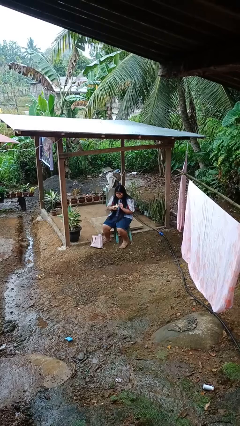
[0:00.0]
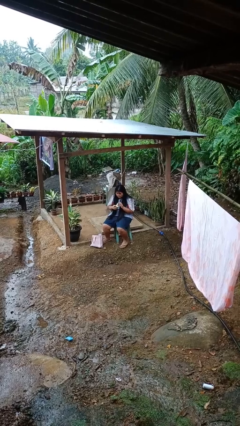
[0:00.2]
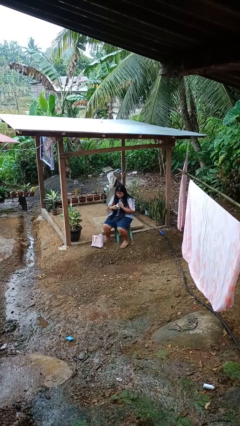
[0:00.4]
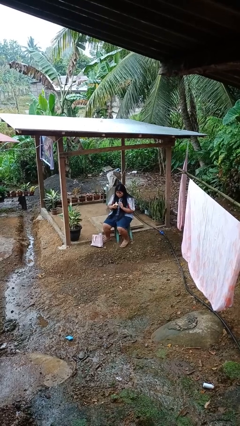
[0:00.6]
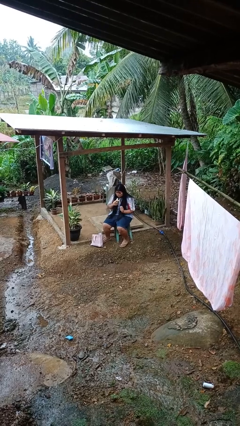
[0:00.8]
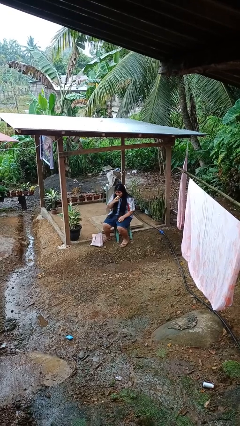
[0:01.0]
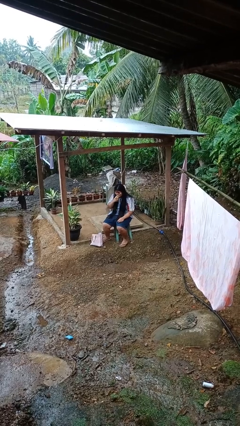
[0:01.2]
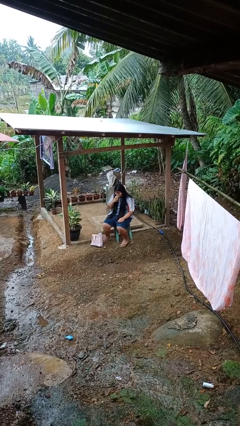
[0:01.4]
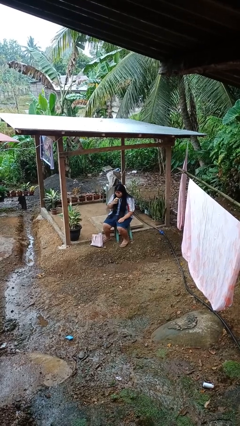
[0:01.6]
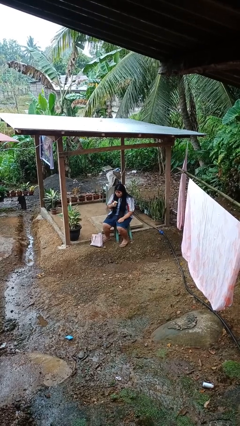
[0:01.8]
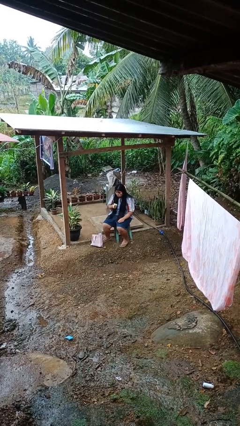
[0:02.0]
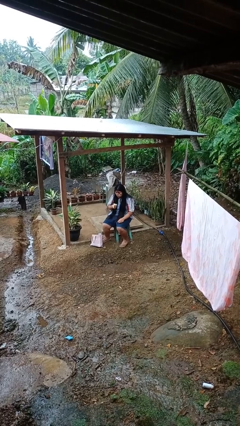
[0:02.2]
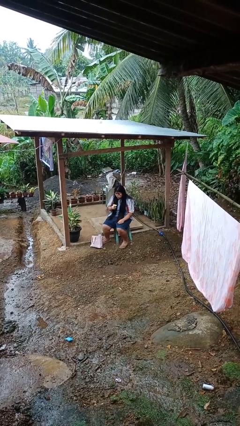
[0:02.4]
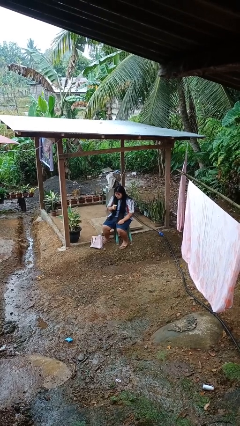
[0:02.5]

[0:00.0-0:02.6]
person eats banana

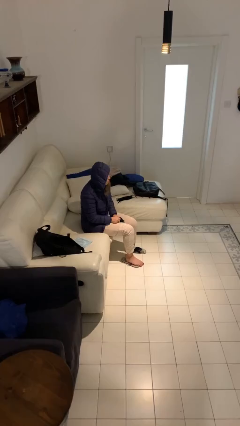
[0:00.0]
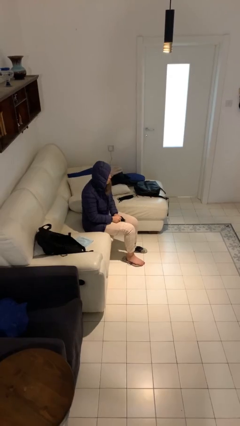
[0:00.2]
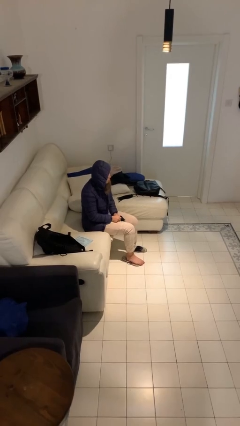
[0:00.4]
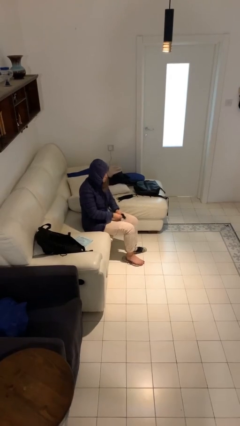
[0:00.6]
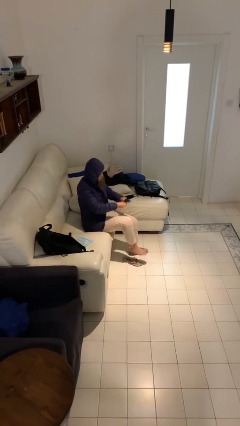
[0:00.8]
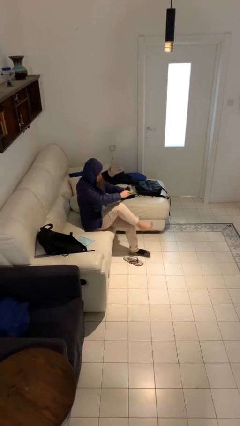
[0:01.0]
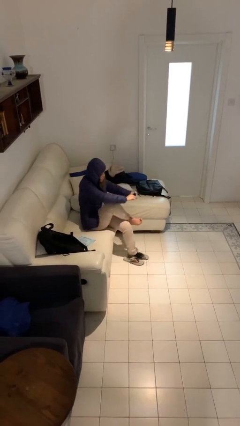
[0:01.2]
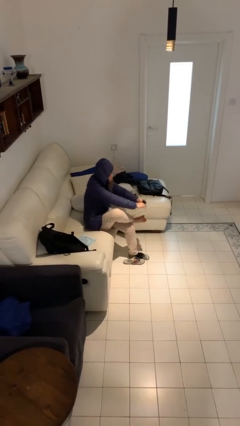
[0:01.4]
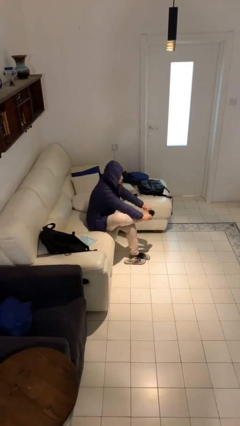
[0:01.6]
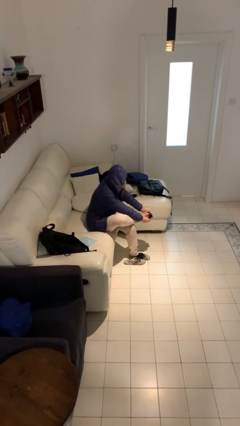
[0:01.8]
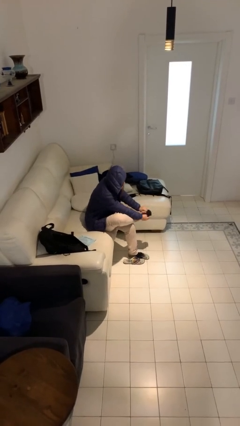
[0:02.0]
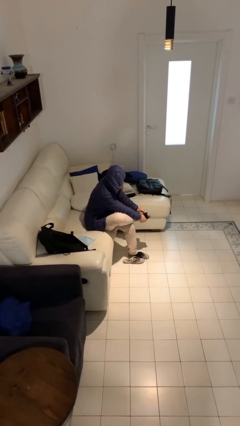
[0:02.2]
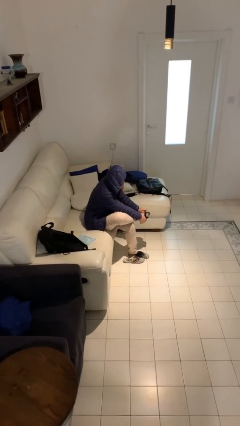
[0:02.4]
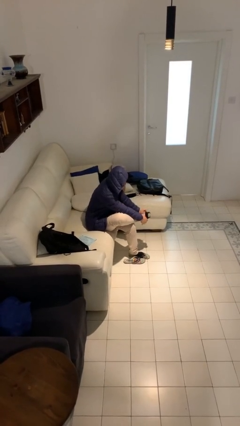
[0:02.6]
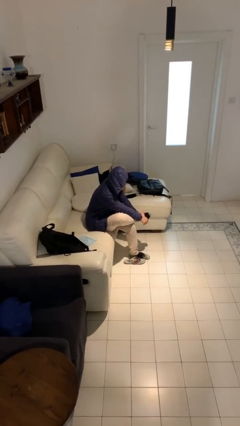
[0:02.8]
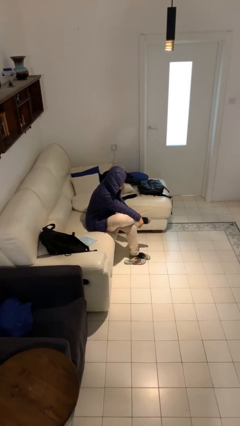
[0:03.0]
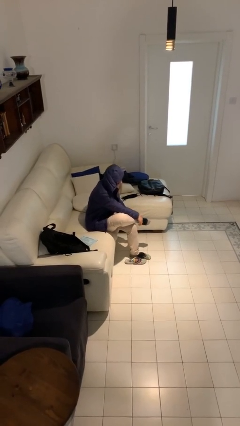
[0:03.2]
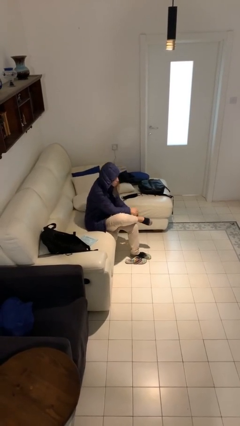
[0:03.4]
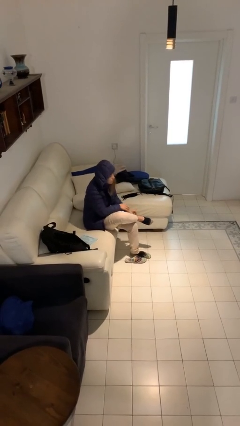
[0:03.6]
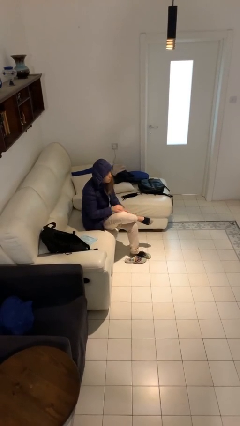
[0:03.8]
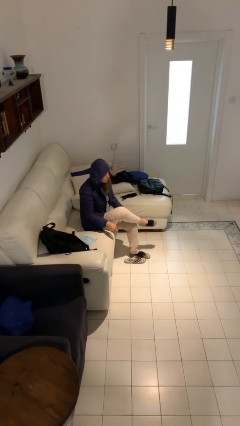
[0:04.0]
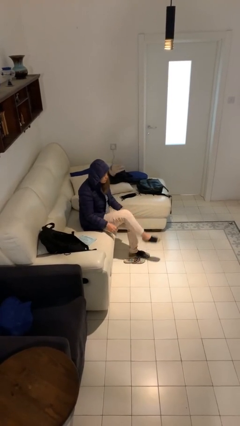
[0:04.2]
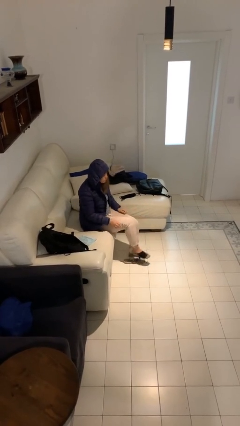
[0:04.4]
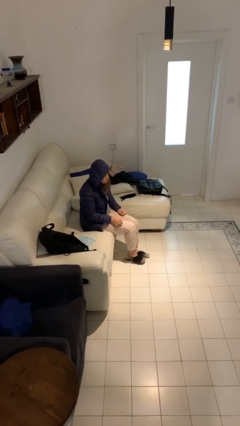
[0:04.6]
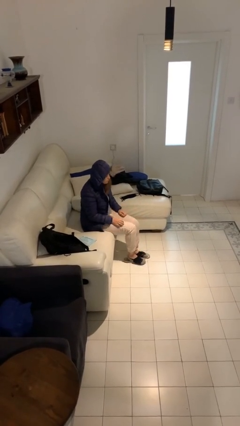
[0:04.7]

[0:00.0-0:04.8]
person puts on socks

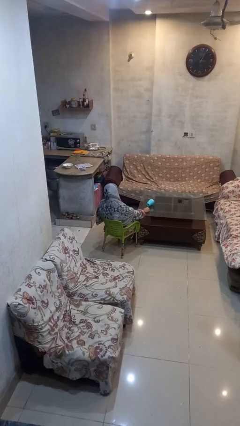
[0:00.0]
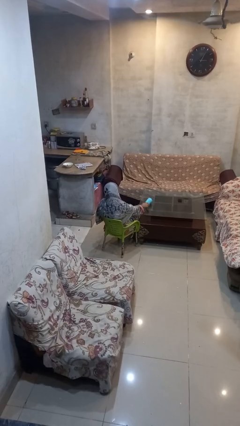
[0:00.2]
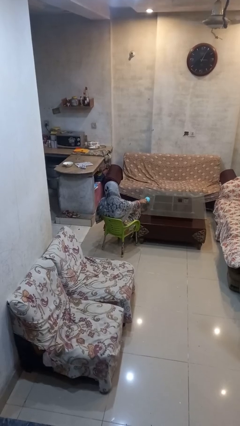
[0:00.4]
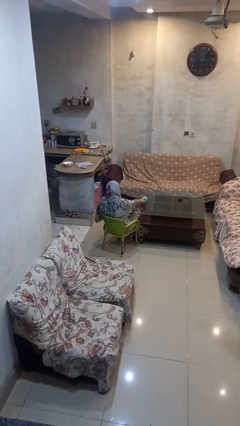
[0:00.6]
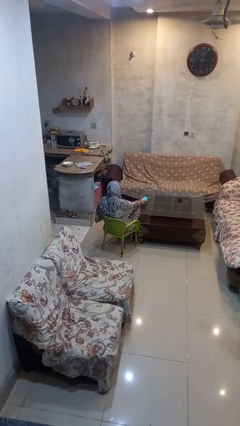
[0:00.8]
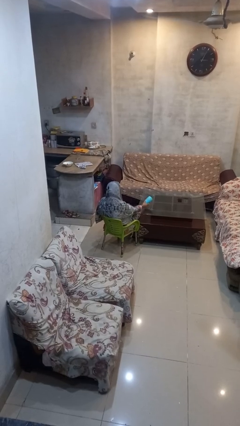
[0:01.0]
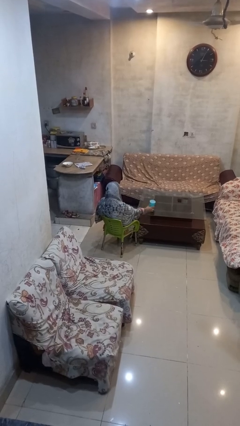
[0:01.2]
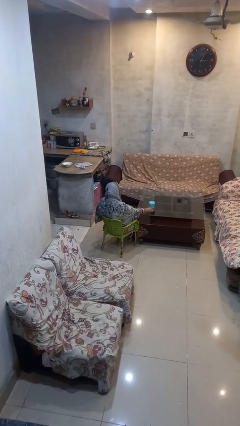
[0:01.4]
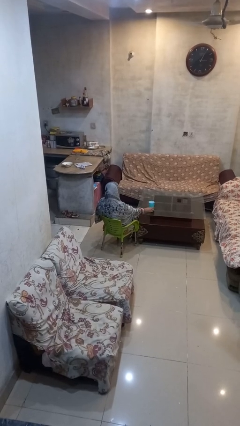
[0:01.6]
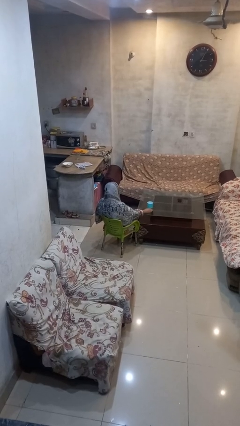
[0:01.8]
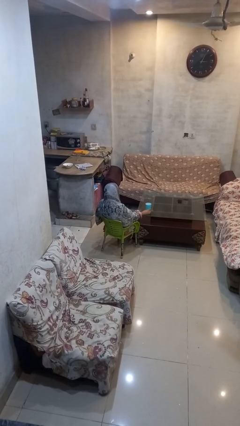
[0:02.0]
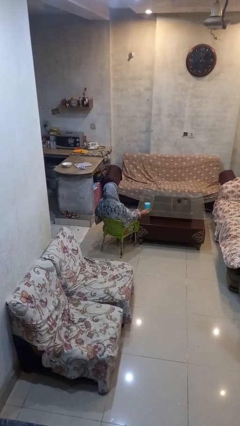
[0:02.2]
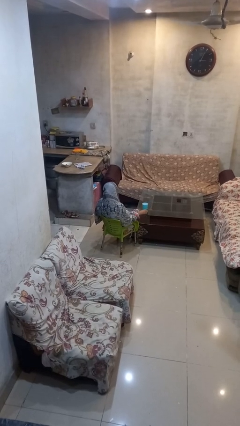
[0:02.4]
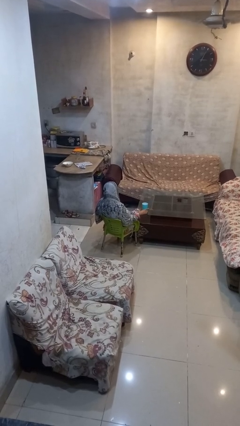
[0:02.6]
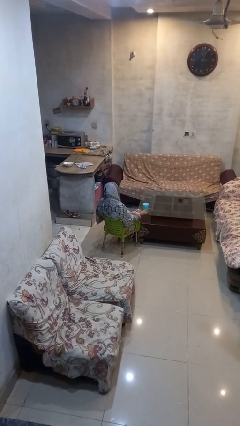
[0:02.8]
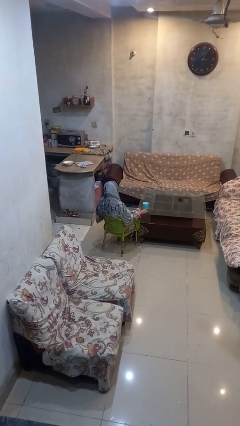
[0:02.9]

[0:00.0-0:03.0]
person sets upright glass

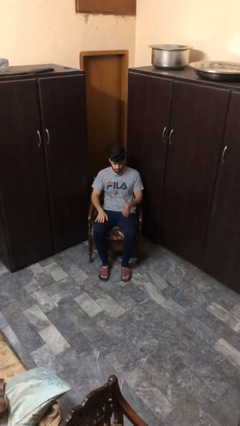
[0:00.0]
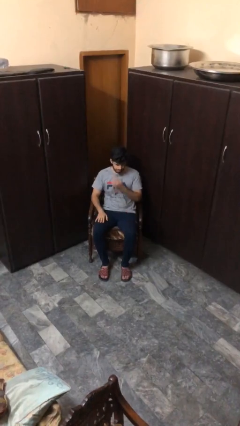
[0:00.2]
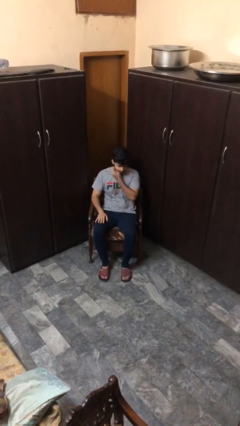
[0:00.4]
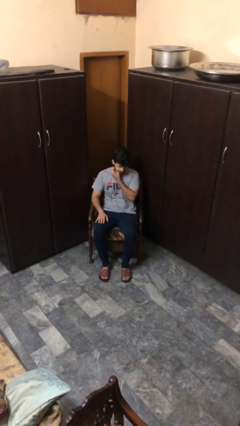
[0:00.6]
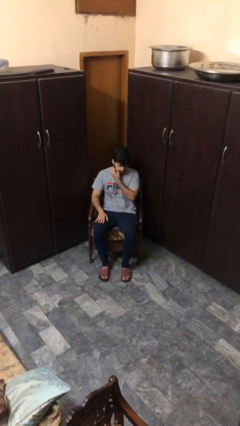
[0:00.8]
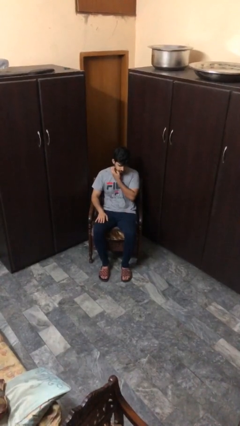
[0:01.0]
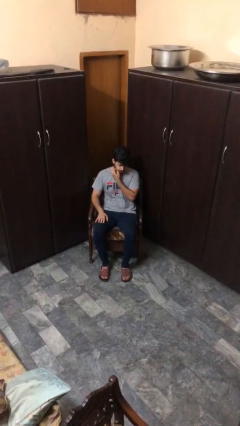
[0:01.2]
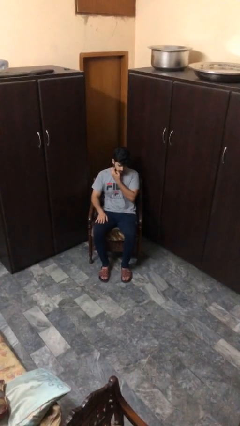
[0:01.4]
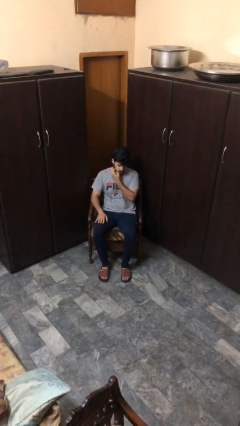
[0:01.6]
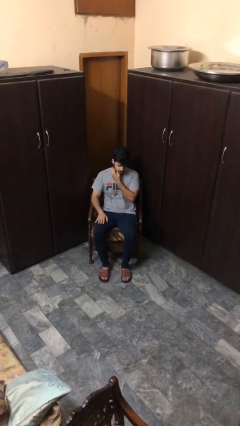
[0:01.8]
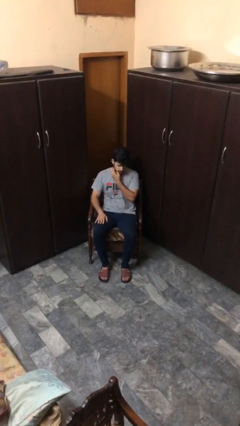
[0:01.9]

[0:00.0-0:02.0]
person scratches face

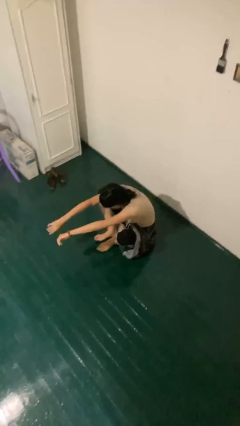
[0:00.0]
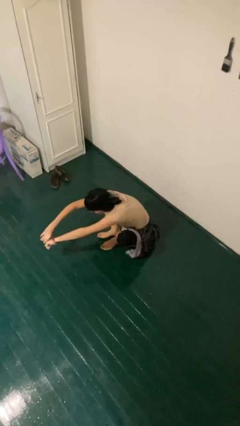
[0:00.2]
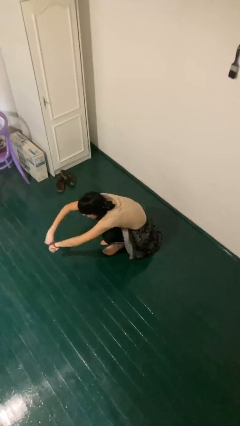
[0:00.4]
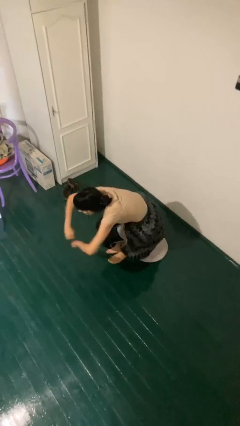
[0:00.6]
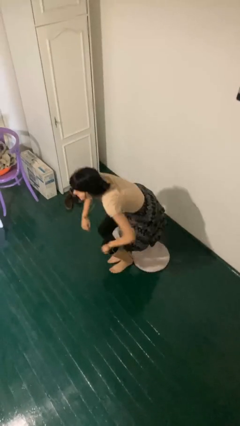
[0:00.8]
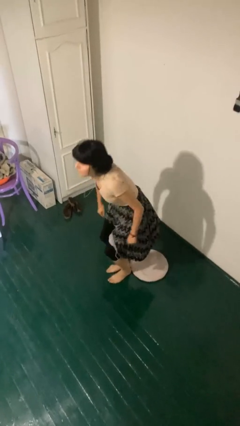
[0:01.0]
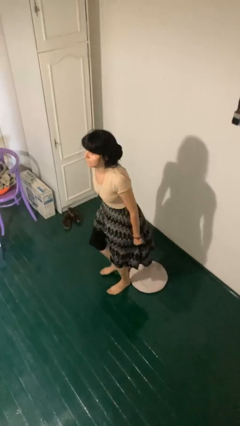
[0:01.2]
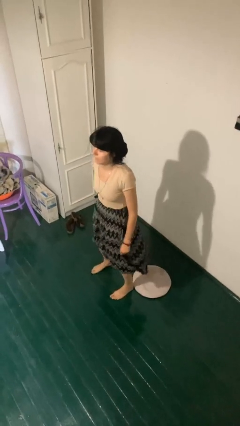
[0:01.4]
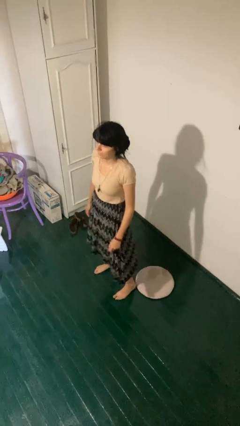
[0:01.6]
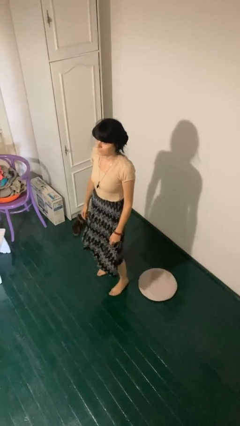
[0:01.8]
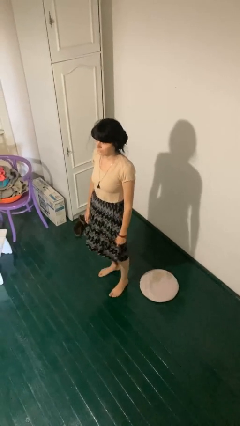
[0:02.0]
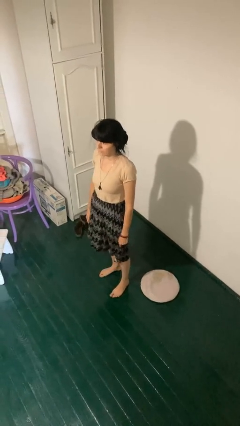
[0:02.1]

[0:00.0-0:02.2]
person stands up from floor

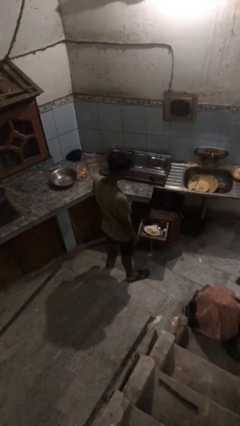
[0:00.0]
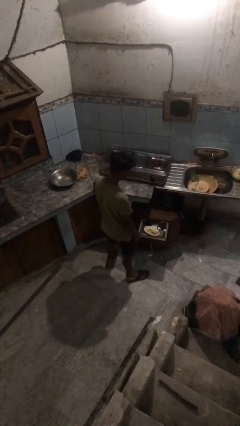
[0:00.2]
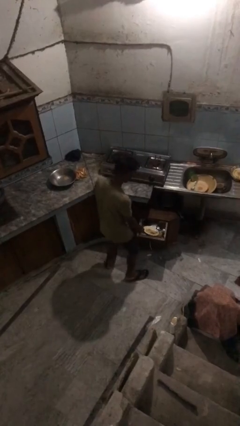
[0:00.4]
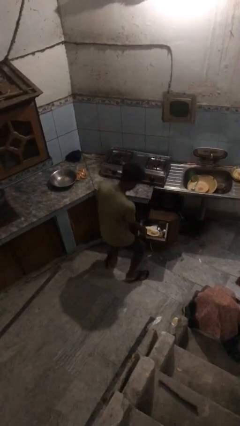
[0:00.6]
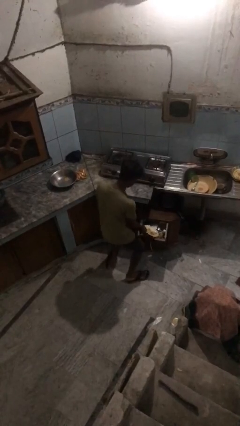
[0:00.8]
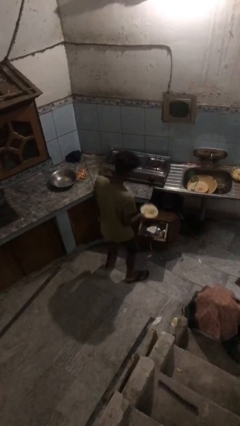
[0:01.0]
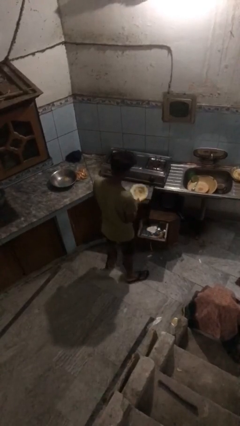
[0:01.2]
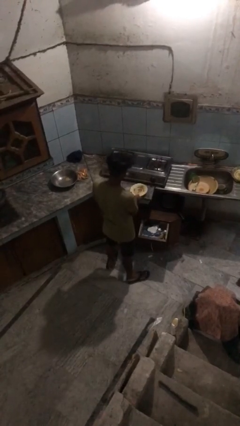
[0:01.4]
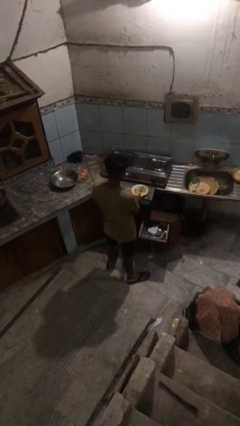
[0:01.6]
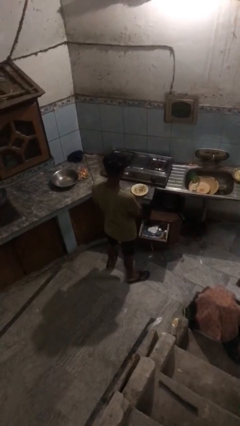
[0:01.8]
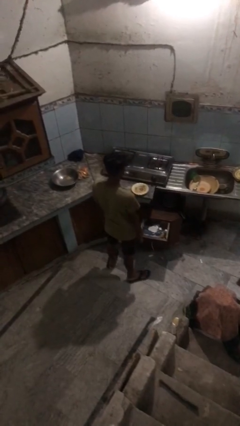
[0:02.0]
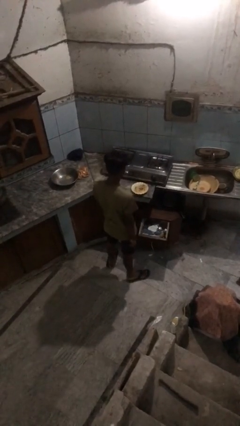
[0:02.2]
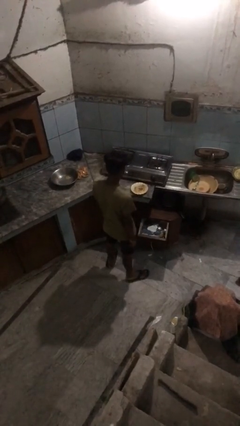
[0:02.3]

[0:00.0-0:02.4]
person takes object from kitchen drawer
